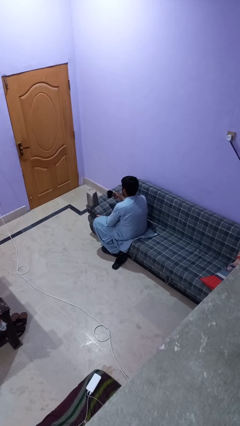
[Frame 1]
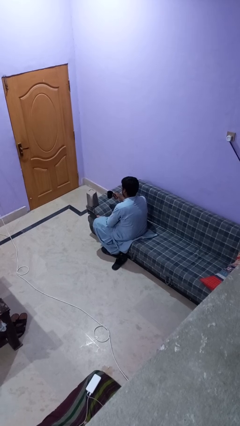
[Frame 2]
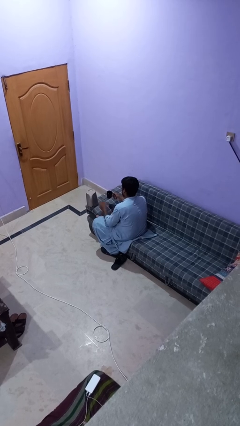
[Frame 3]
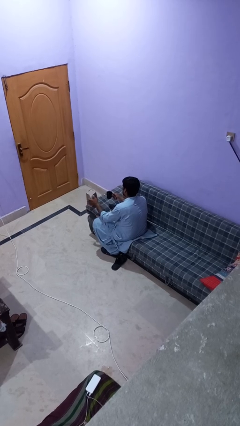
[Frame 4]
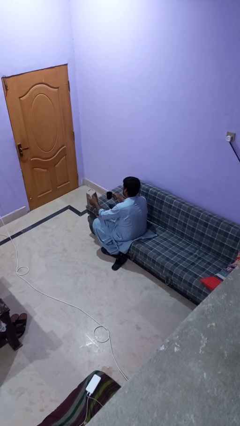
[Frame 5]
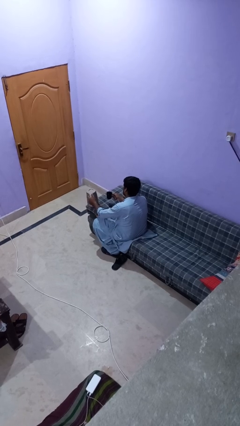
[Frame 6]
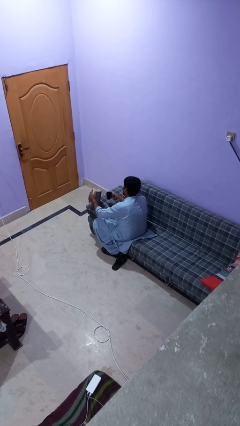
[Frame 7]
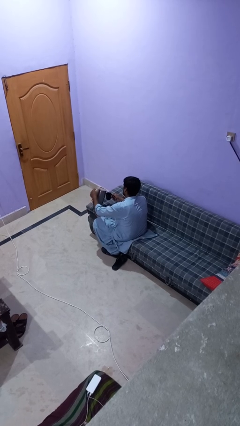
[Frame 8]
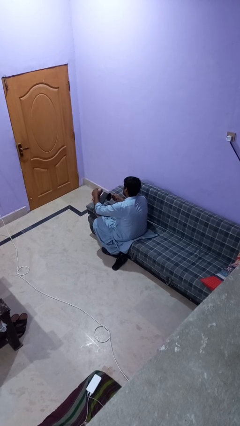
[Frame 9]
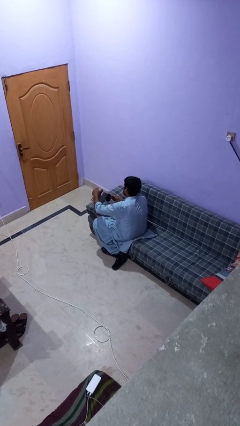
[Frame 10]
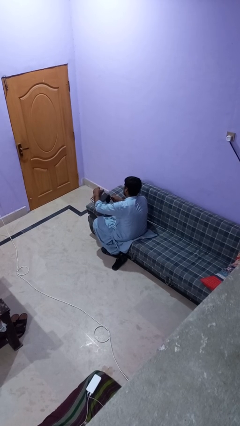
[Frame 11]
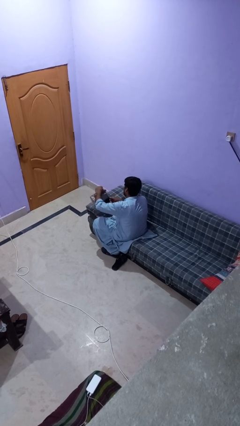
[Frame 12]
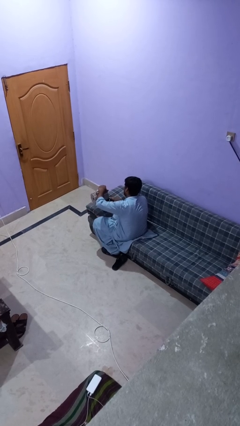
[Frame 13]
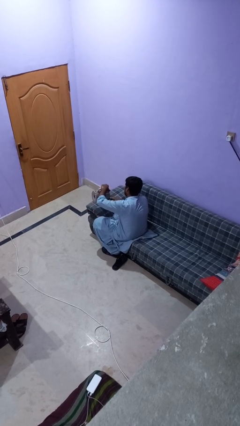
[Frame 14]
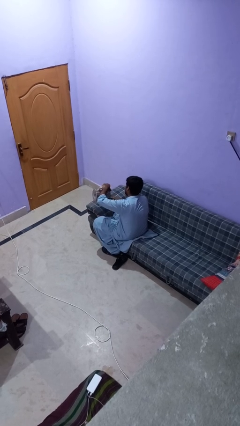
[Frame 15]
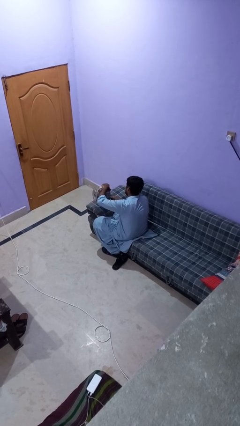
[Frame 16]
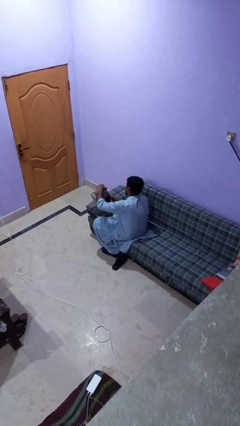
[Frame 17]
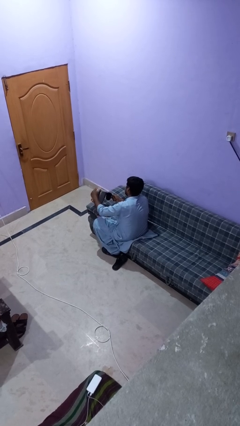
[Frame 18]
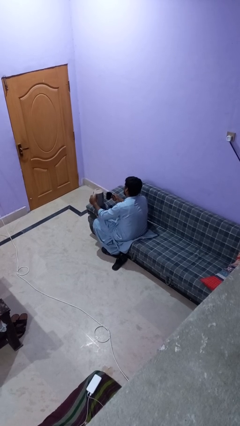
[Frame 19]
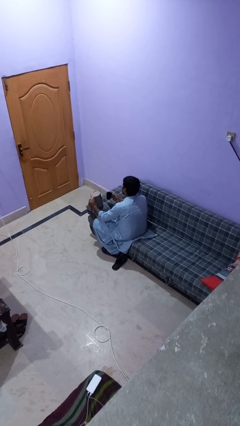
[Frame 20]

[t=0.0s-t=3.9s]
person pours coffee into mug

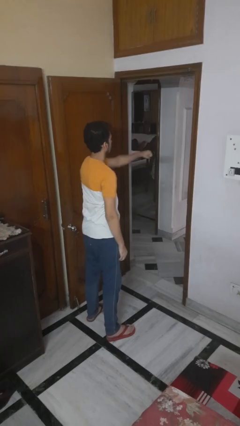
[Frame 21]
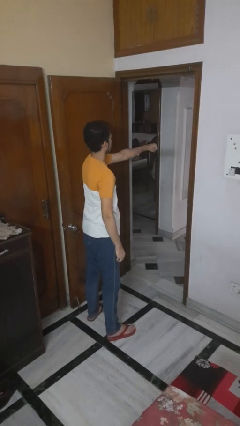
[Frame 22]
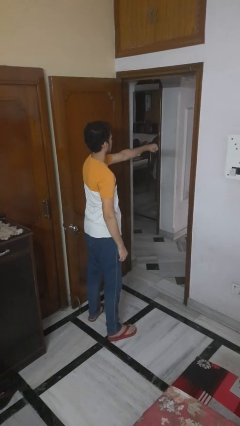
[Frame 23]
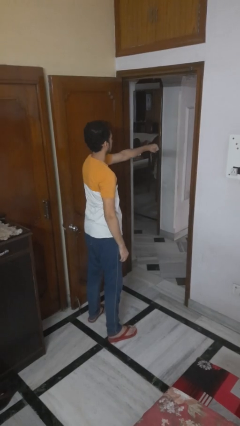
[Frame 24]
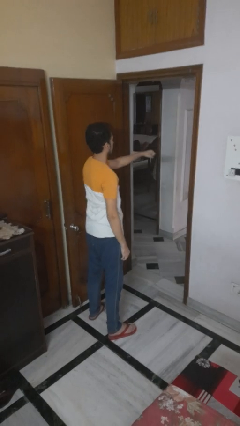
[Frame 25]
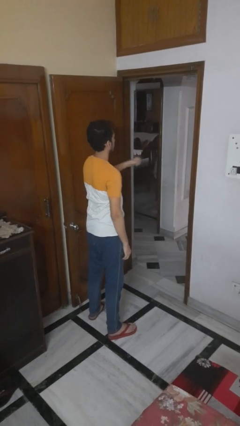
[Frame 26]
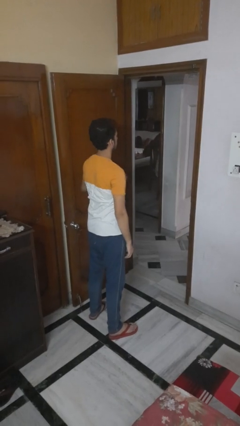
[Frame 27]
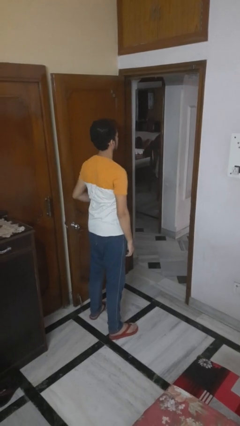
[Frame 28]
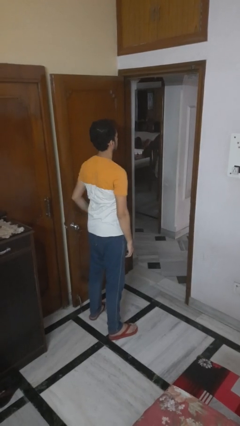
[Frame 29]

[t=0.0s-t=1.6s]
person punches

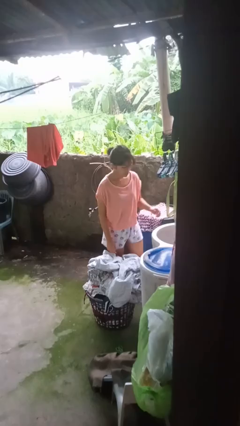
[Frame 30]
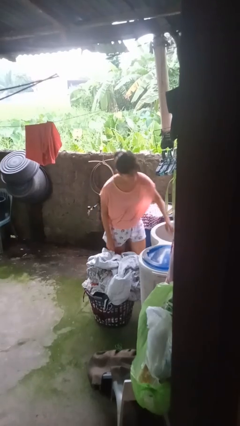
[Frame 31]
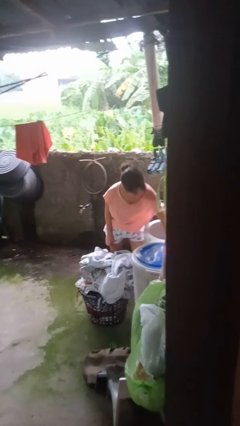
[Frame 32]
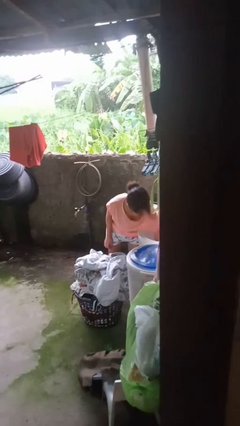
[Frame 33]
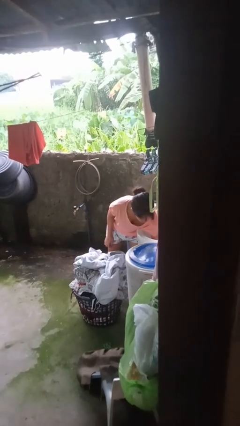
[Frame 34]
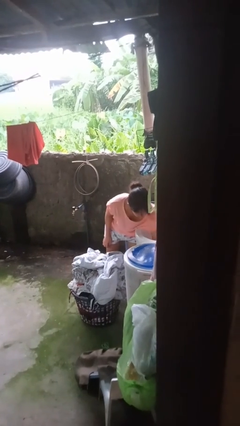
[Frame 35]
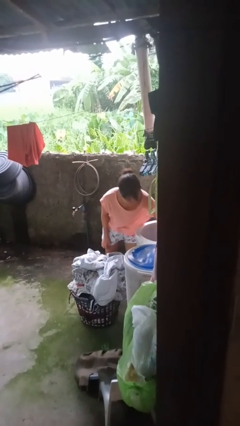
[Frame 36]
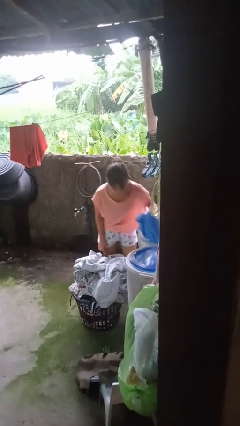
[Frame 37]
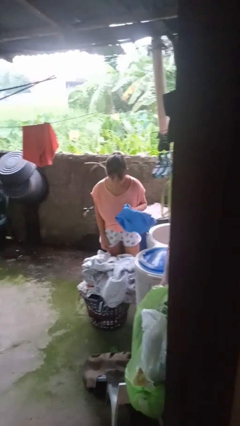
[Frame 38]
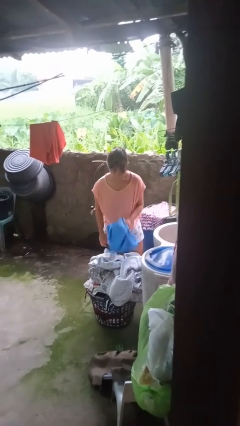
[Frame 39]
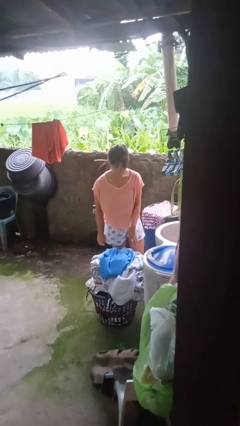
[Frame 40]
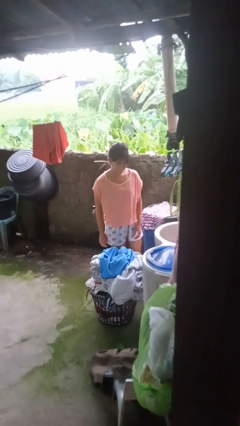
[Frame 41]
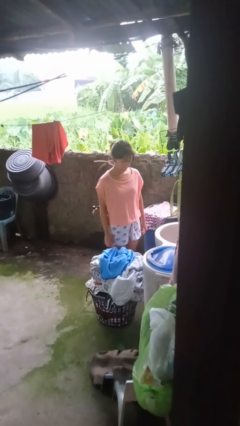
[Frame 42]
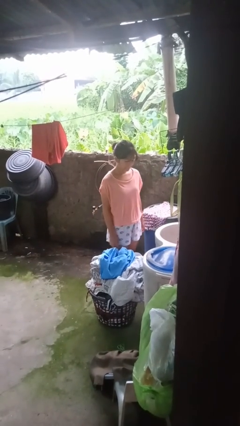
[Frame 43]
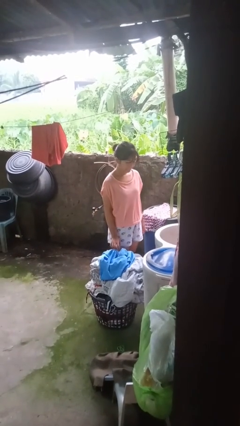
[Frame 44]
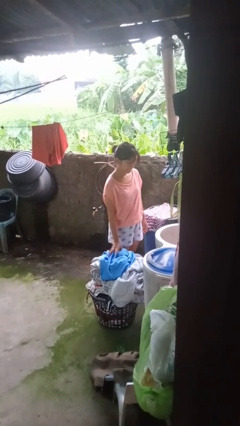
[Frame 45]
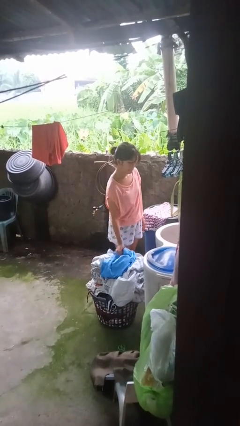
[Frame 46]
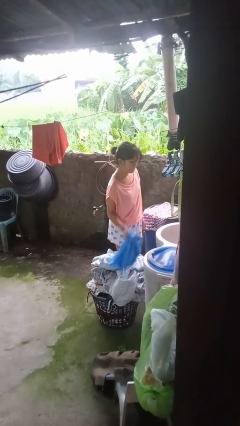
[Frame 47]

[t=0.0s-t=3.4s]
person unloads clotheswasher

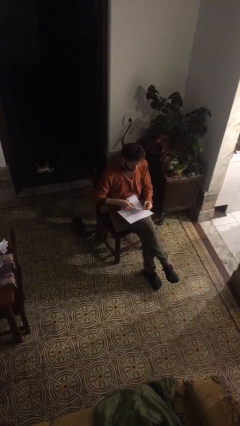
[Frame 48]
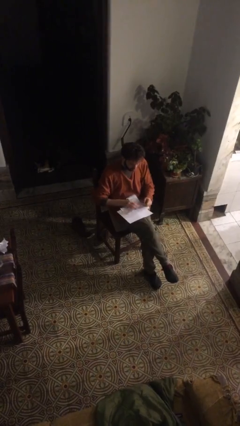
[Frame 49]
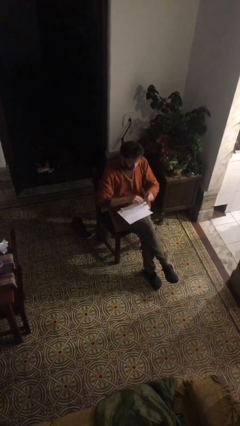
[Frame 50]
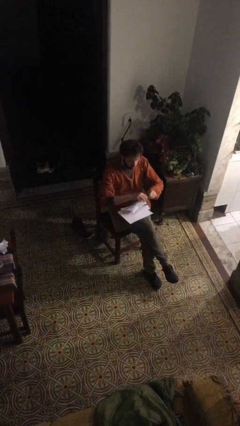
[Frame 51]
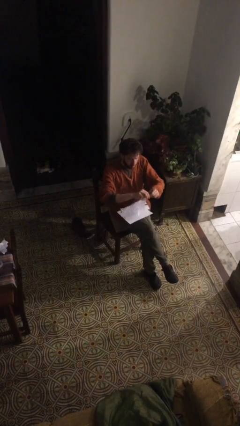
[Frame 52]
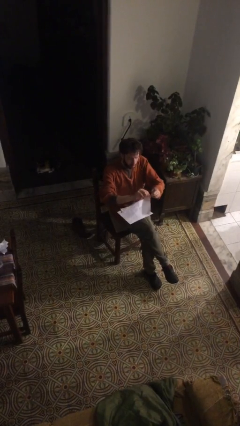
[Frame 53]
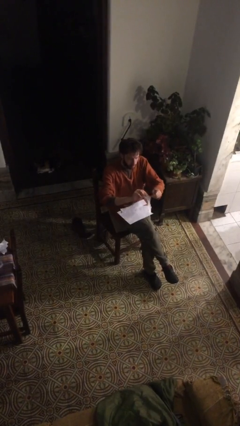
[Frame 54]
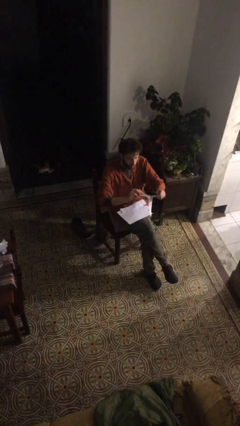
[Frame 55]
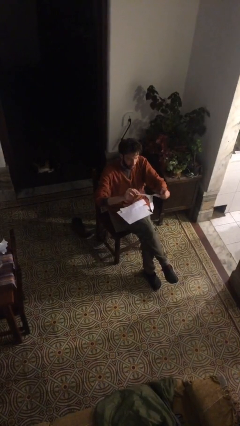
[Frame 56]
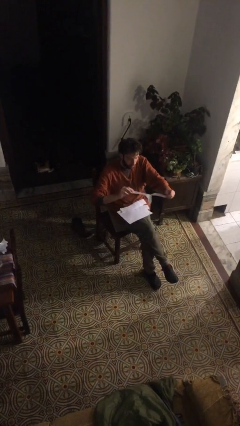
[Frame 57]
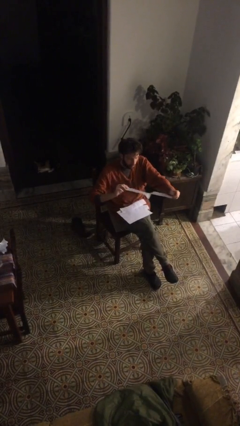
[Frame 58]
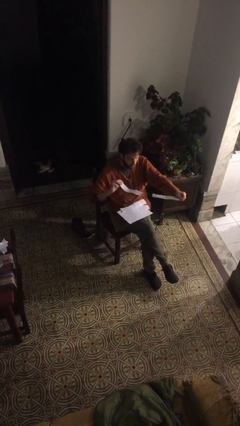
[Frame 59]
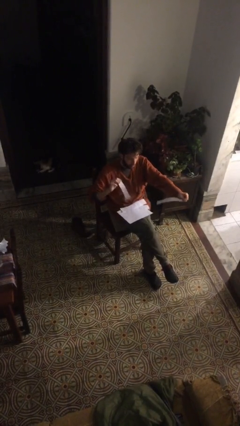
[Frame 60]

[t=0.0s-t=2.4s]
person tears paper

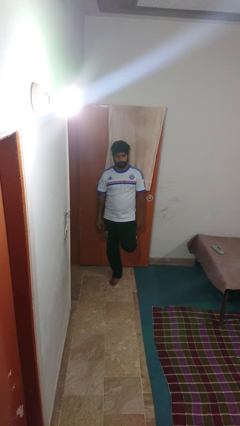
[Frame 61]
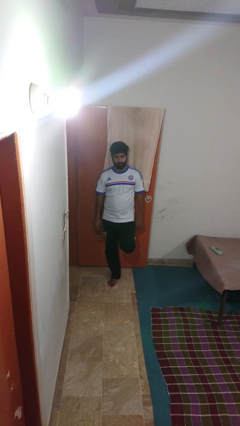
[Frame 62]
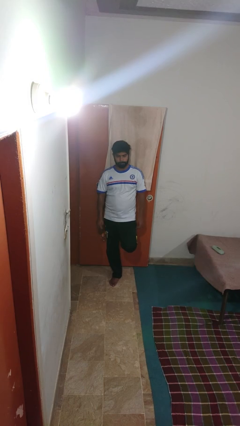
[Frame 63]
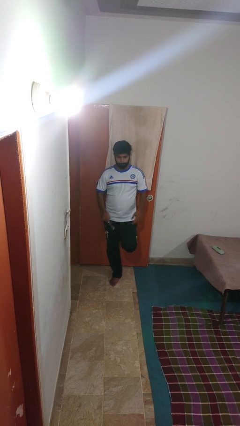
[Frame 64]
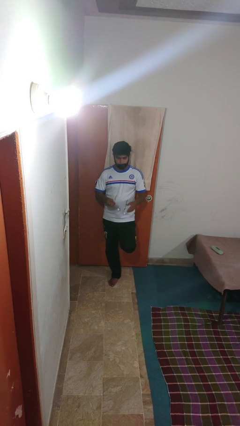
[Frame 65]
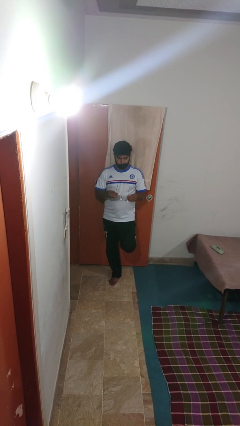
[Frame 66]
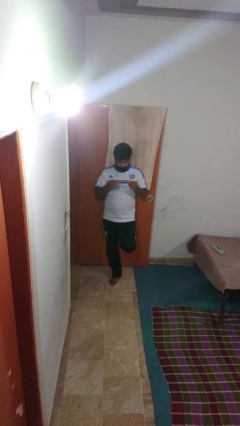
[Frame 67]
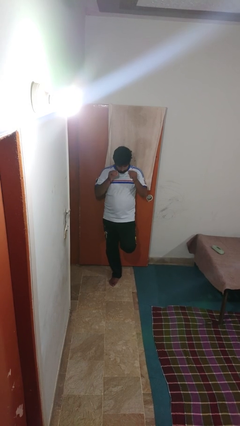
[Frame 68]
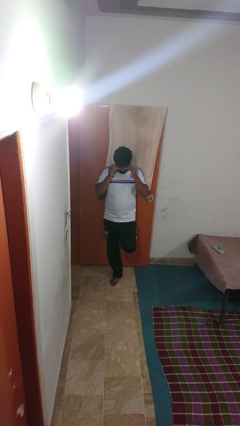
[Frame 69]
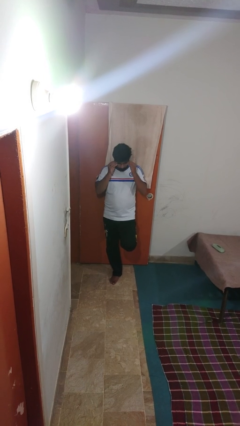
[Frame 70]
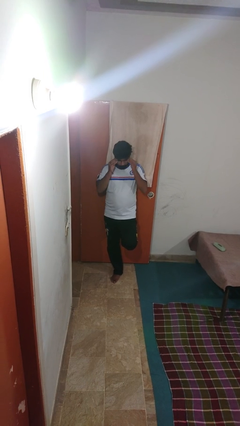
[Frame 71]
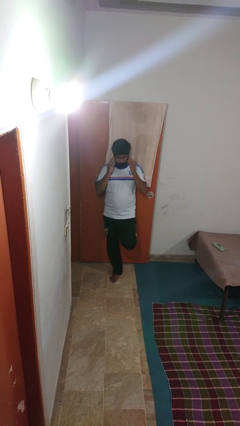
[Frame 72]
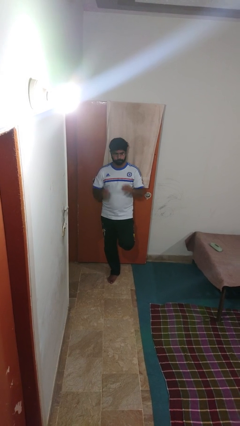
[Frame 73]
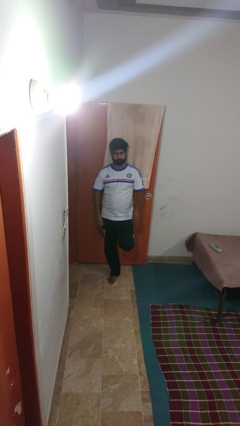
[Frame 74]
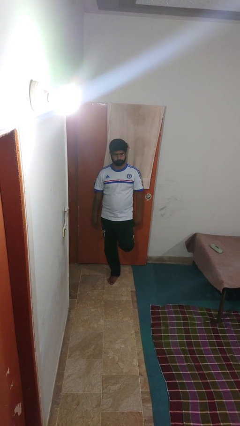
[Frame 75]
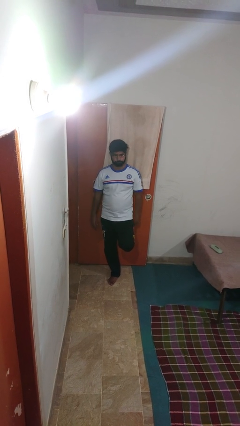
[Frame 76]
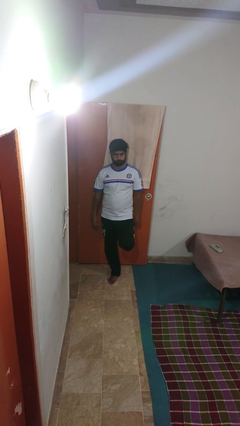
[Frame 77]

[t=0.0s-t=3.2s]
person puts on glasses

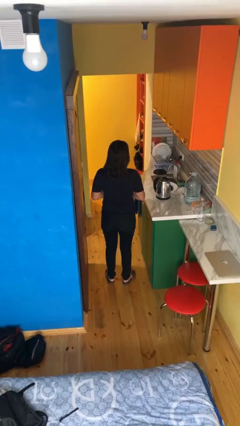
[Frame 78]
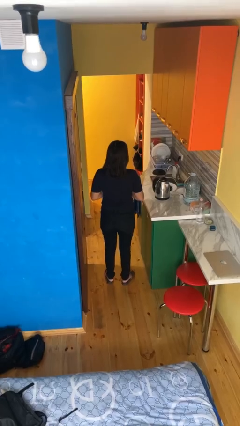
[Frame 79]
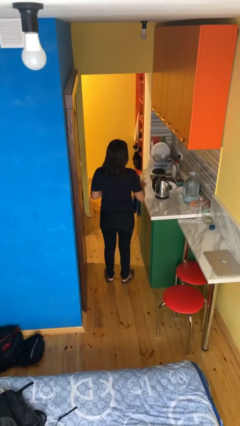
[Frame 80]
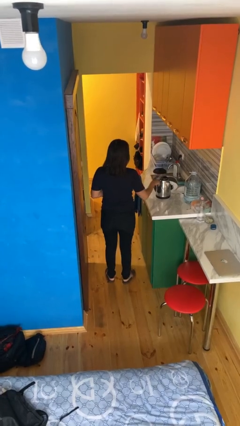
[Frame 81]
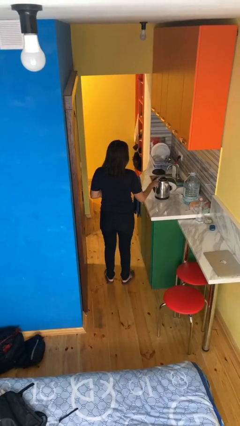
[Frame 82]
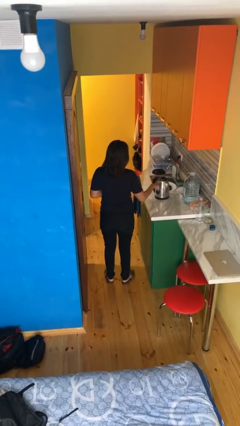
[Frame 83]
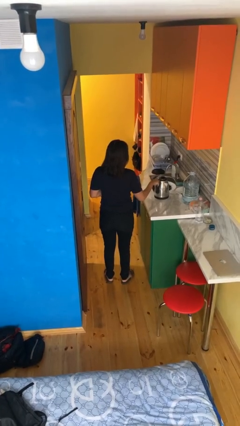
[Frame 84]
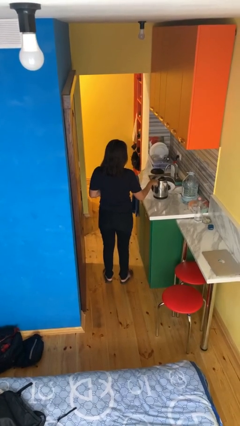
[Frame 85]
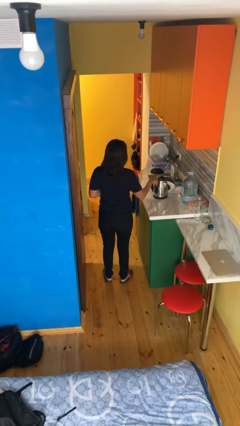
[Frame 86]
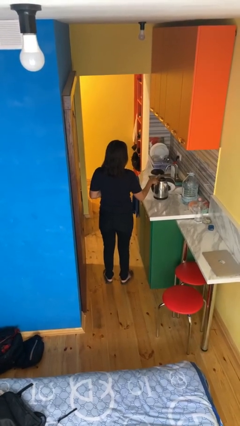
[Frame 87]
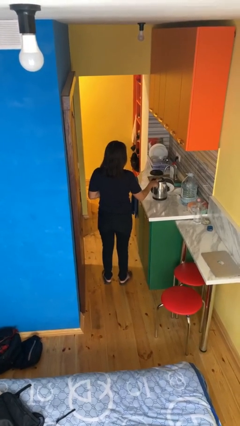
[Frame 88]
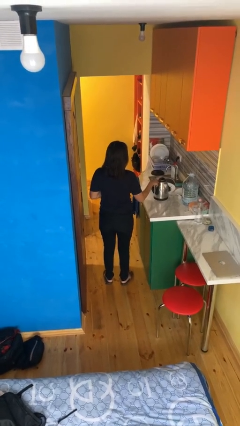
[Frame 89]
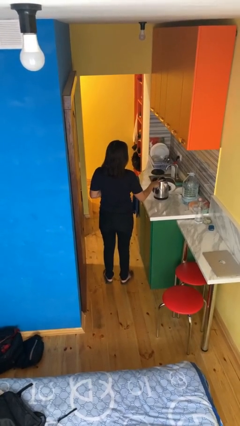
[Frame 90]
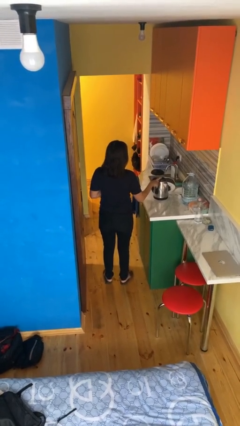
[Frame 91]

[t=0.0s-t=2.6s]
person taps object with finger

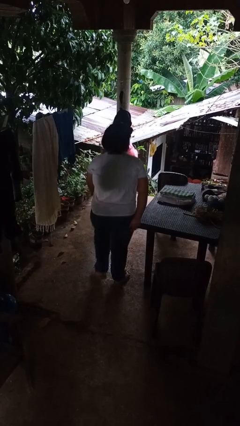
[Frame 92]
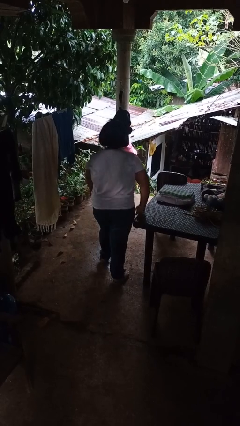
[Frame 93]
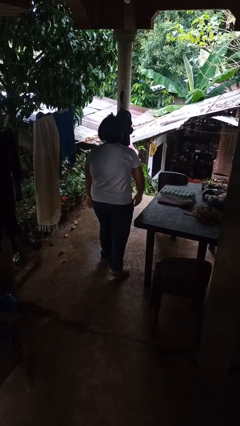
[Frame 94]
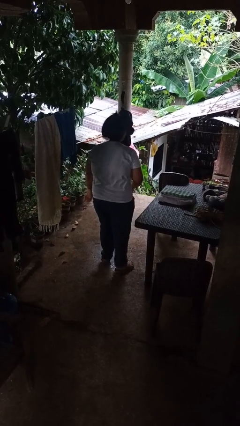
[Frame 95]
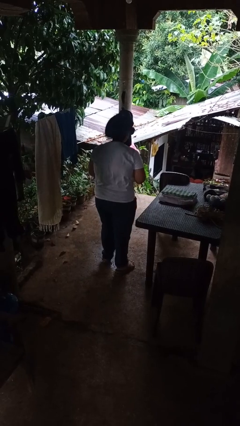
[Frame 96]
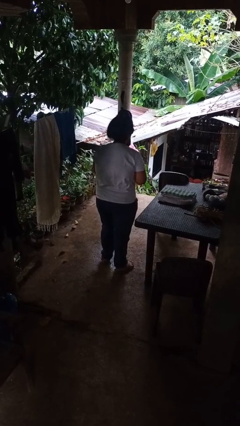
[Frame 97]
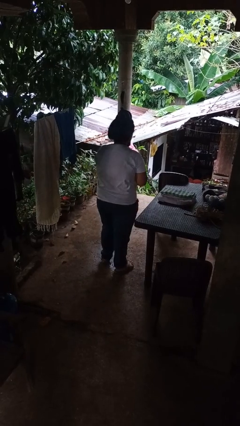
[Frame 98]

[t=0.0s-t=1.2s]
person bumps into table
